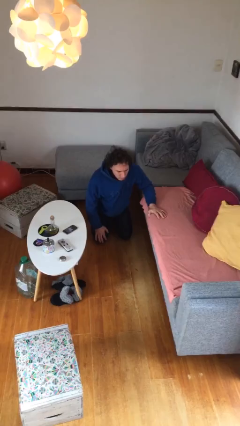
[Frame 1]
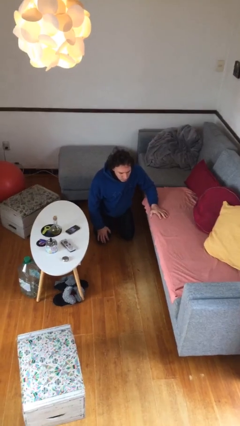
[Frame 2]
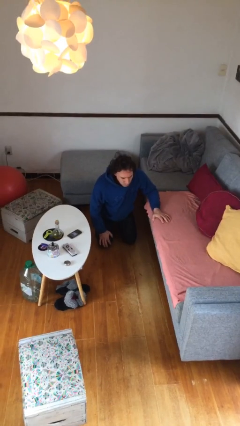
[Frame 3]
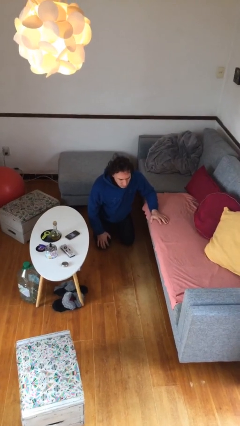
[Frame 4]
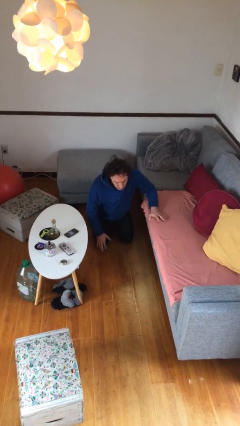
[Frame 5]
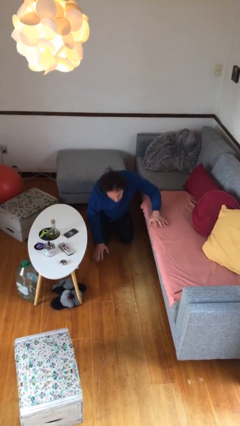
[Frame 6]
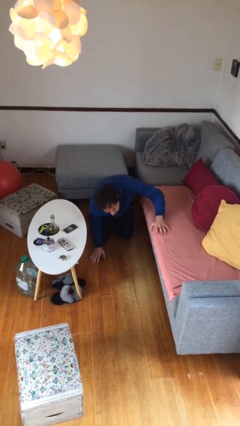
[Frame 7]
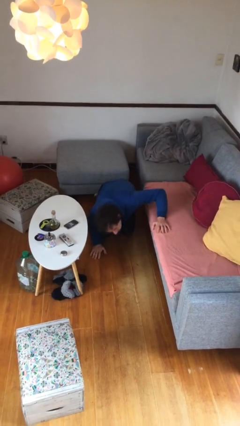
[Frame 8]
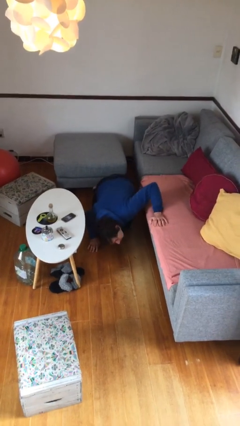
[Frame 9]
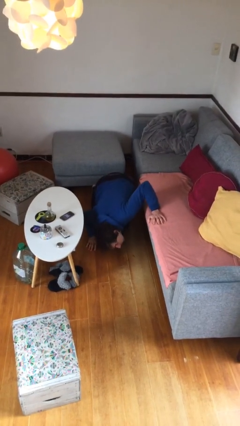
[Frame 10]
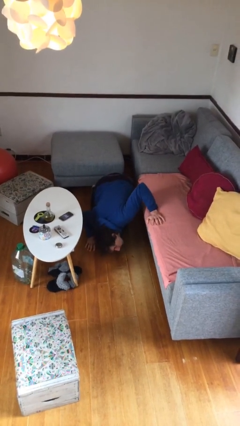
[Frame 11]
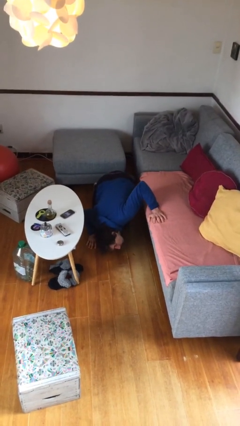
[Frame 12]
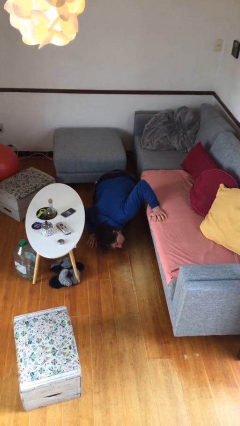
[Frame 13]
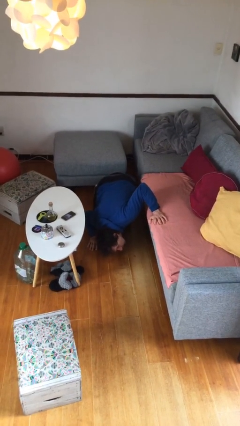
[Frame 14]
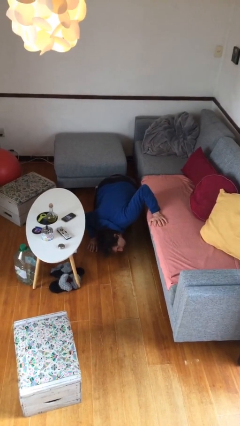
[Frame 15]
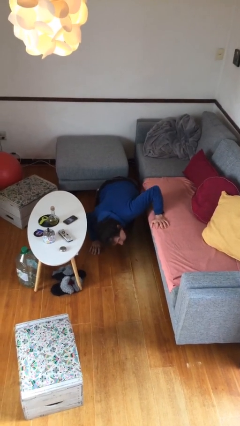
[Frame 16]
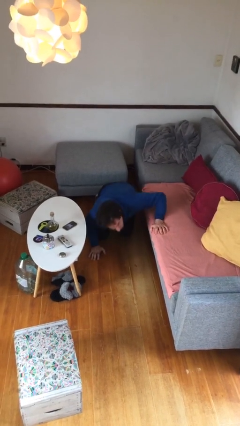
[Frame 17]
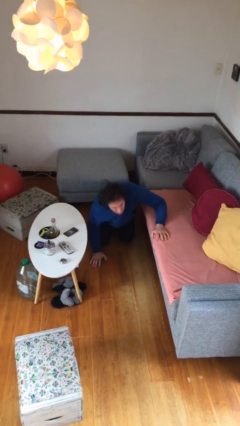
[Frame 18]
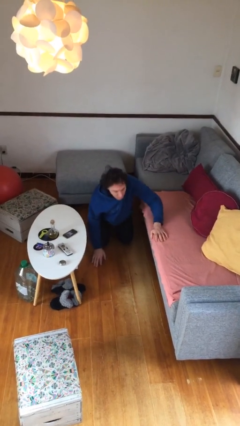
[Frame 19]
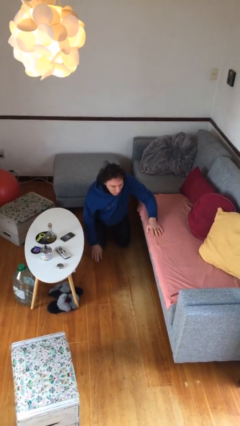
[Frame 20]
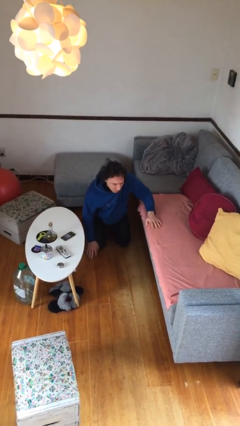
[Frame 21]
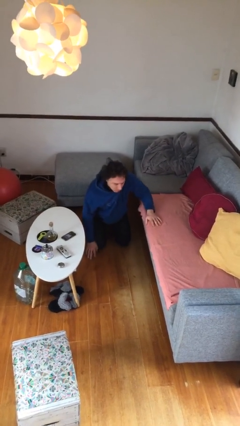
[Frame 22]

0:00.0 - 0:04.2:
person searches under couch

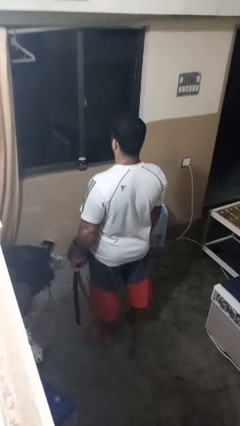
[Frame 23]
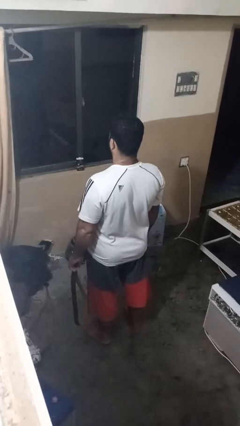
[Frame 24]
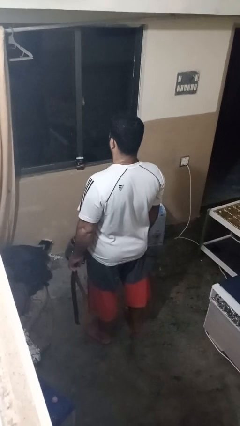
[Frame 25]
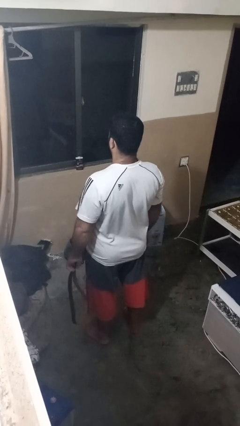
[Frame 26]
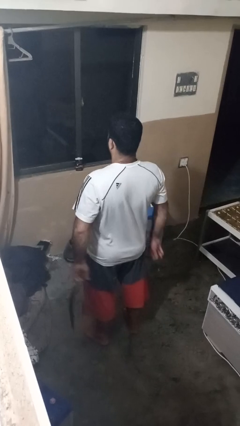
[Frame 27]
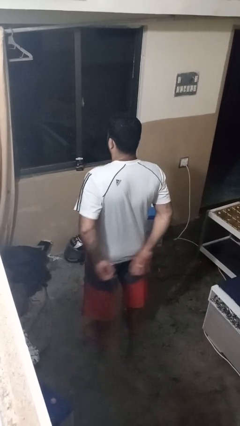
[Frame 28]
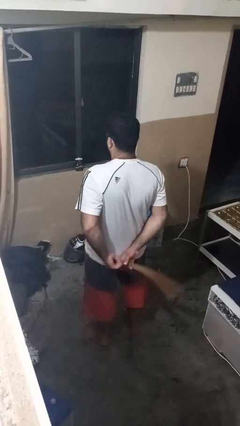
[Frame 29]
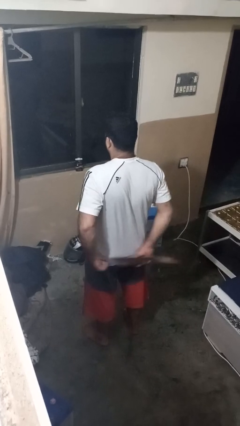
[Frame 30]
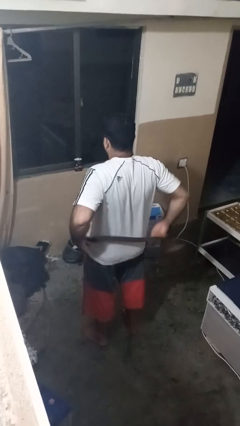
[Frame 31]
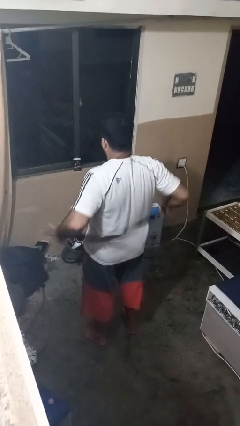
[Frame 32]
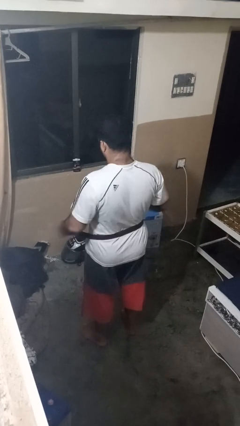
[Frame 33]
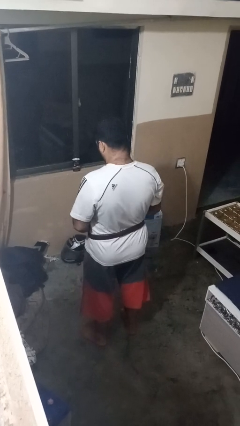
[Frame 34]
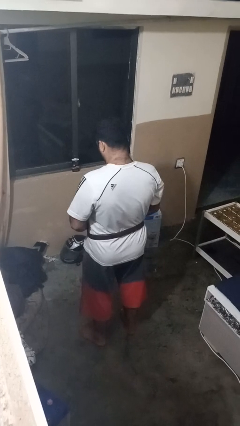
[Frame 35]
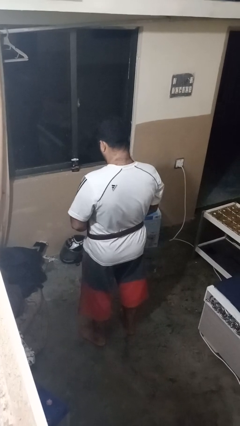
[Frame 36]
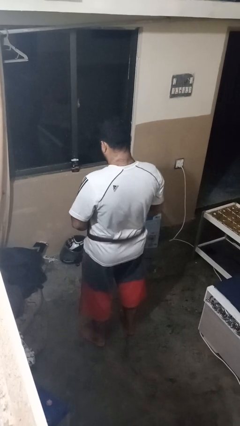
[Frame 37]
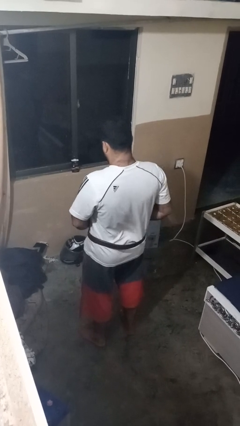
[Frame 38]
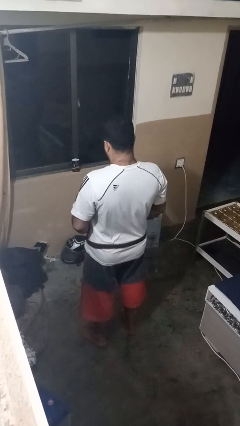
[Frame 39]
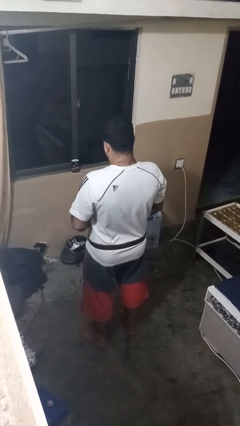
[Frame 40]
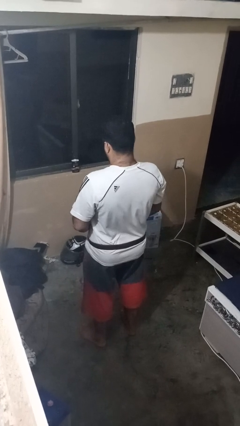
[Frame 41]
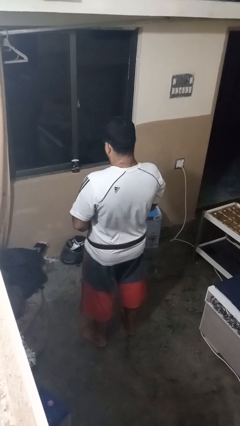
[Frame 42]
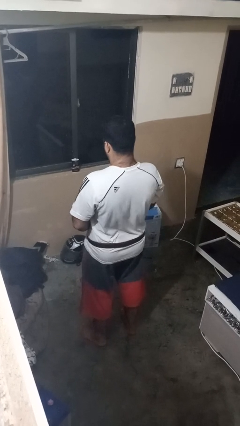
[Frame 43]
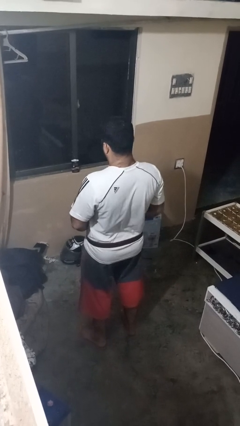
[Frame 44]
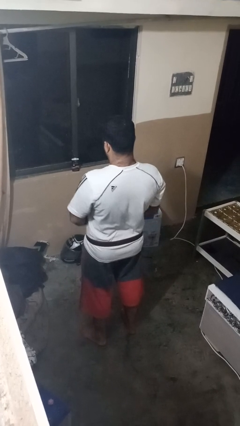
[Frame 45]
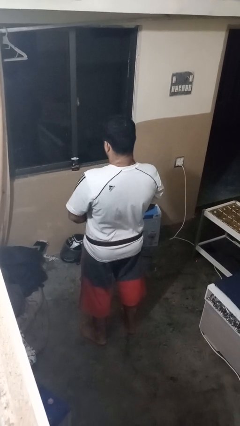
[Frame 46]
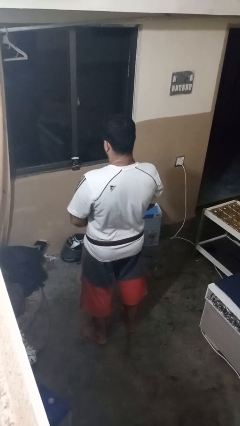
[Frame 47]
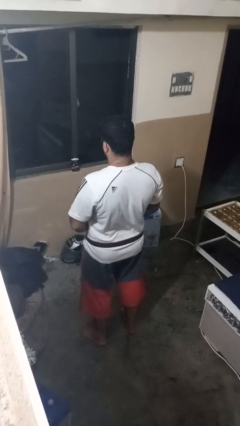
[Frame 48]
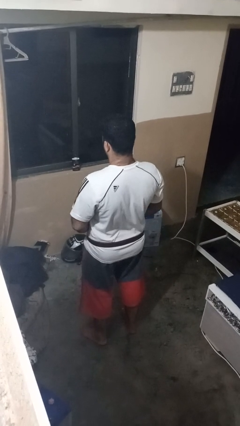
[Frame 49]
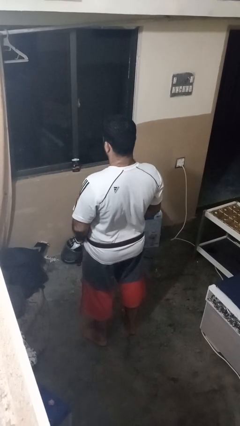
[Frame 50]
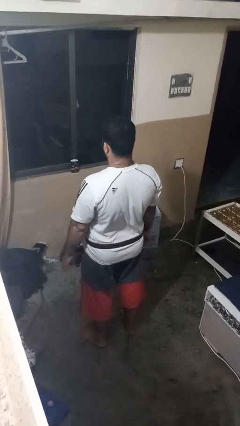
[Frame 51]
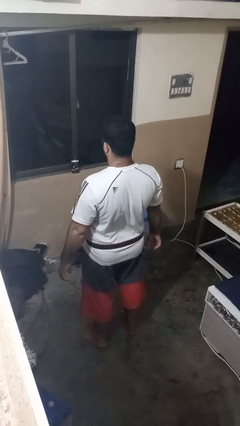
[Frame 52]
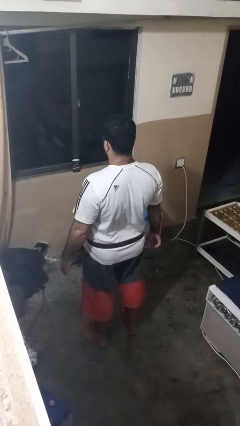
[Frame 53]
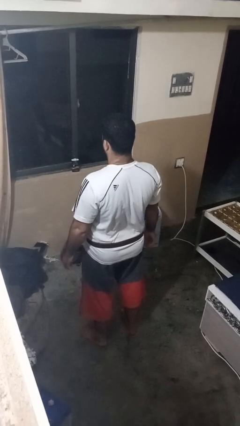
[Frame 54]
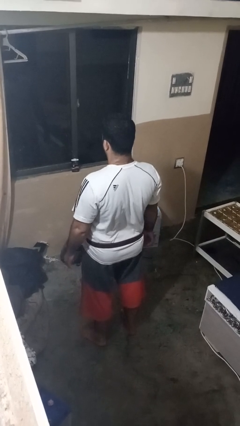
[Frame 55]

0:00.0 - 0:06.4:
person puts on belt

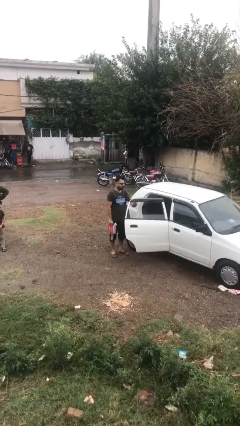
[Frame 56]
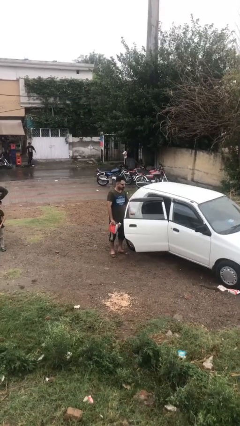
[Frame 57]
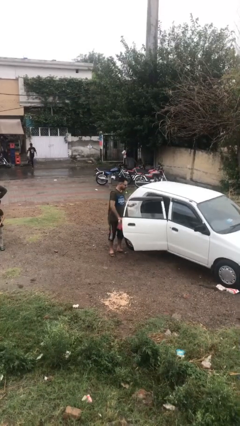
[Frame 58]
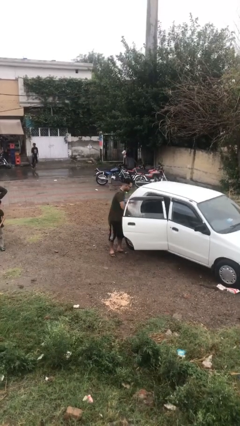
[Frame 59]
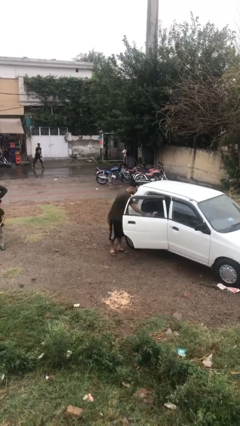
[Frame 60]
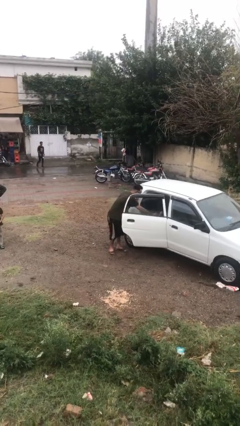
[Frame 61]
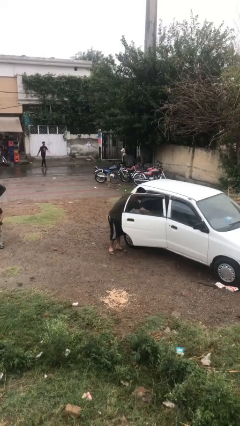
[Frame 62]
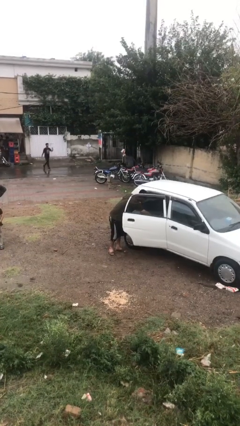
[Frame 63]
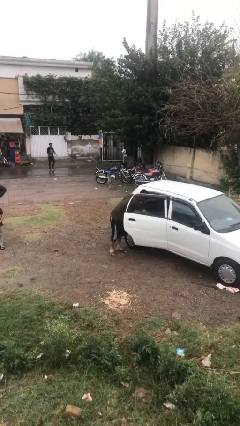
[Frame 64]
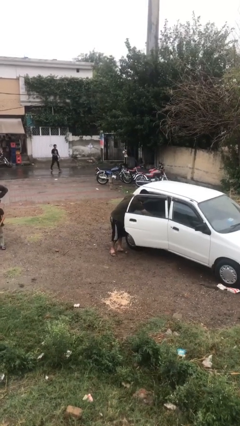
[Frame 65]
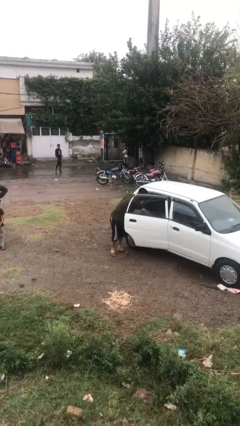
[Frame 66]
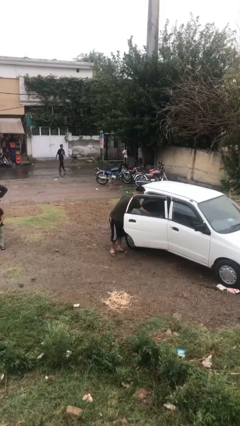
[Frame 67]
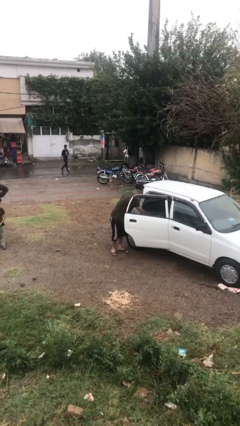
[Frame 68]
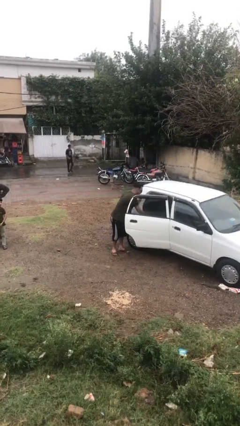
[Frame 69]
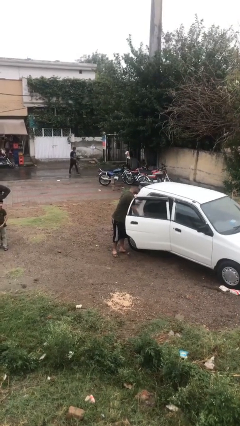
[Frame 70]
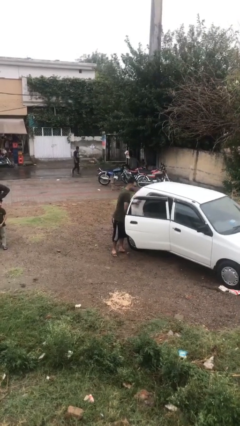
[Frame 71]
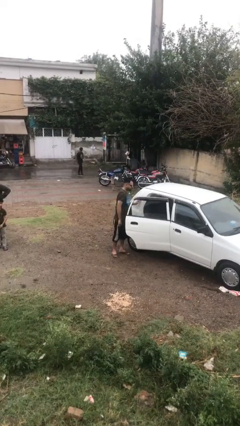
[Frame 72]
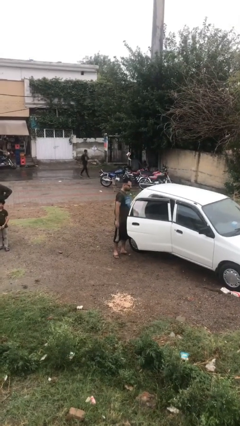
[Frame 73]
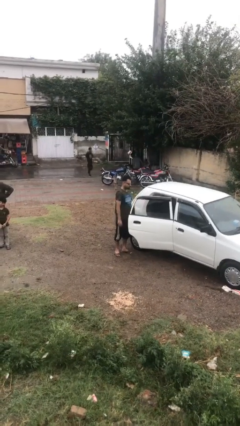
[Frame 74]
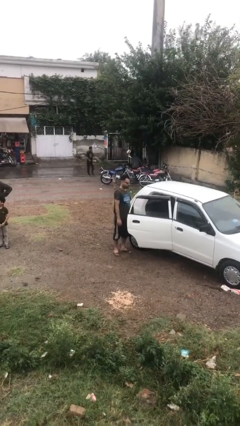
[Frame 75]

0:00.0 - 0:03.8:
person loads car

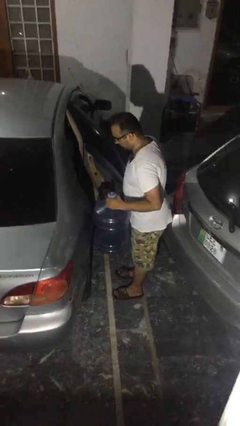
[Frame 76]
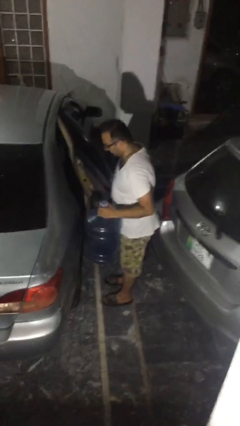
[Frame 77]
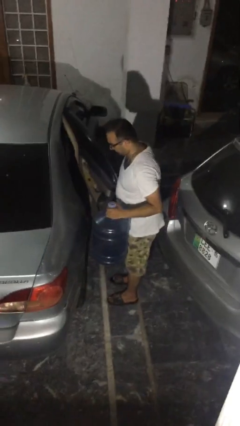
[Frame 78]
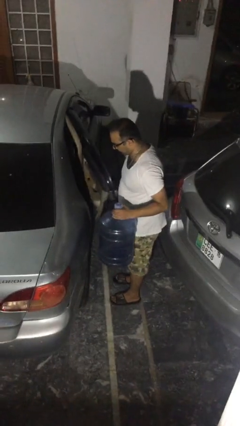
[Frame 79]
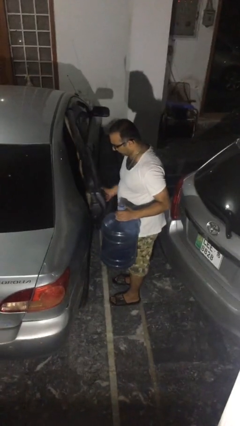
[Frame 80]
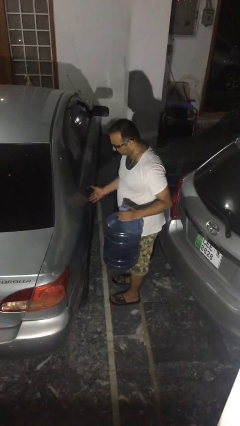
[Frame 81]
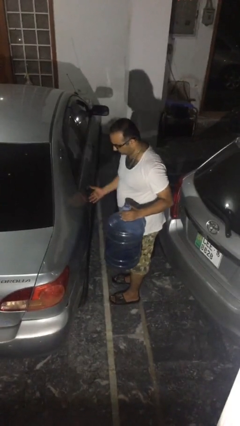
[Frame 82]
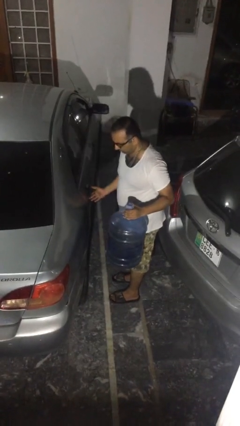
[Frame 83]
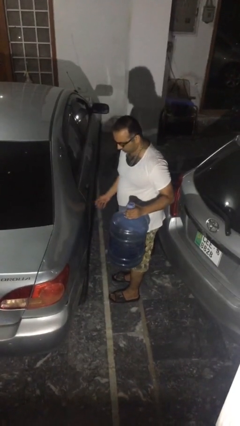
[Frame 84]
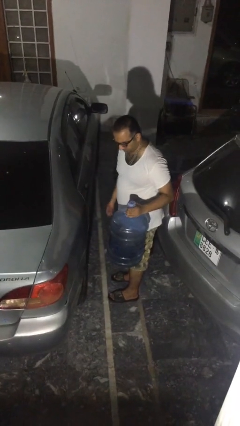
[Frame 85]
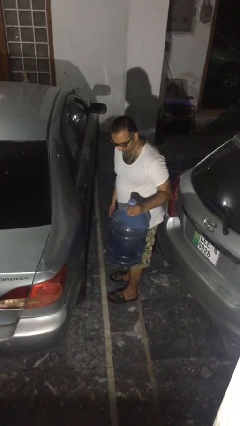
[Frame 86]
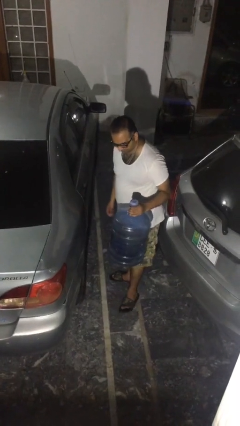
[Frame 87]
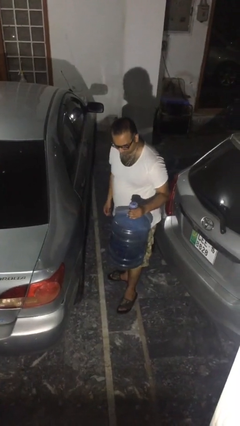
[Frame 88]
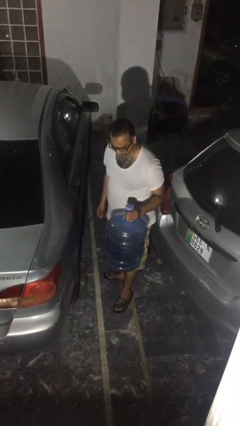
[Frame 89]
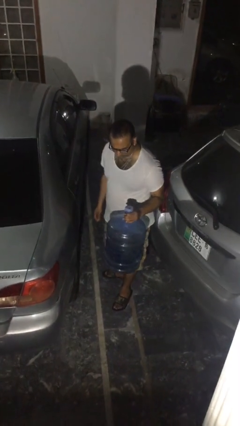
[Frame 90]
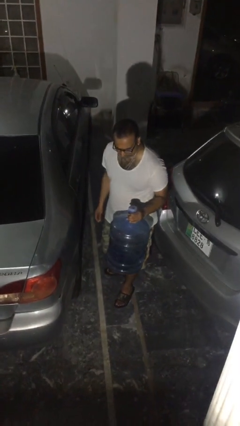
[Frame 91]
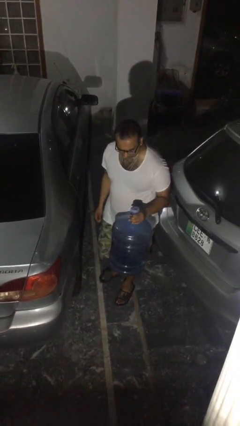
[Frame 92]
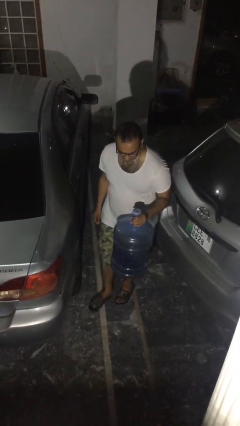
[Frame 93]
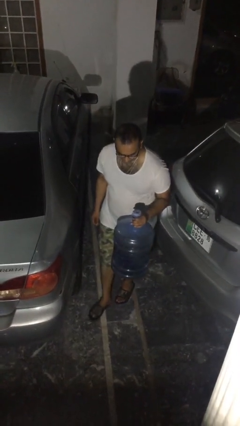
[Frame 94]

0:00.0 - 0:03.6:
person closes car door
